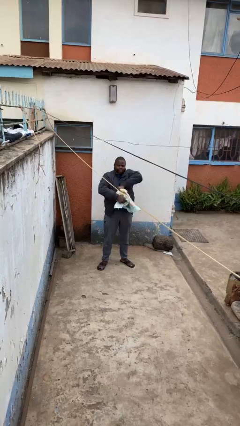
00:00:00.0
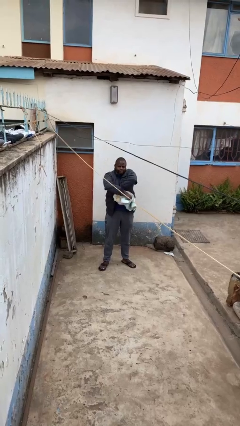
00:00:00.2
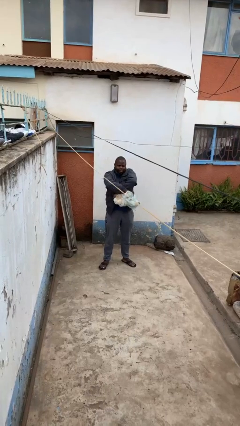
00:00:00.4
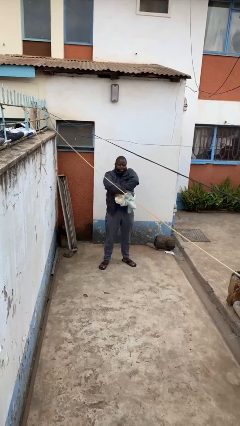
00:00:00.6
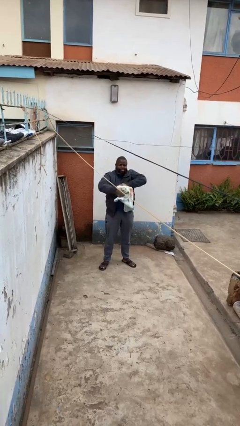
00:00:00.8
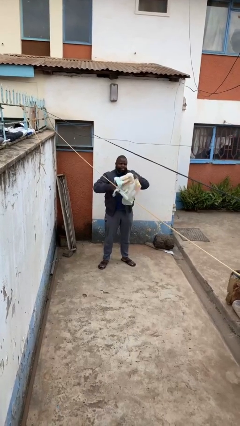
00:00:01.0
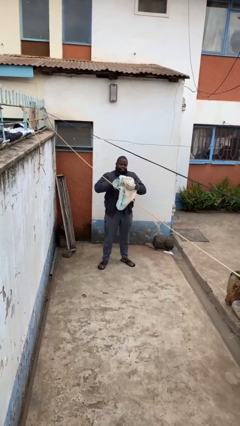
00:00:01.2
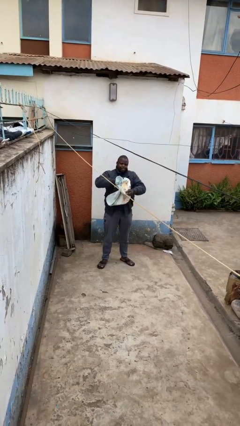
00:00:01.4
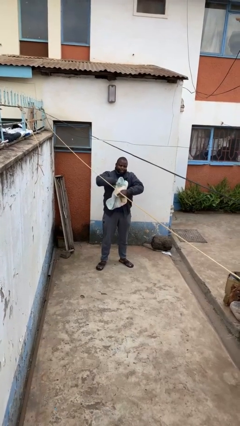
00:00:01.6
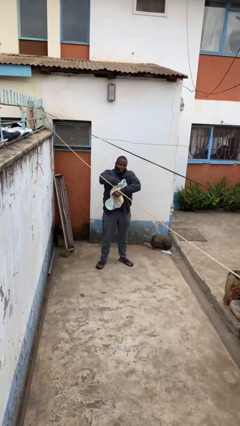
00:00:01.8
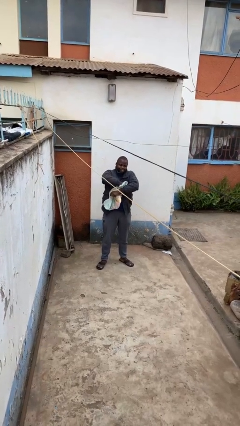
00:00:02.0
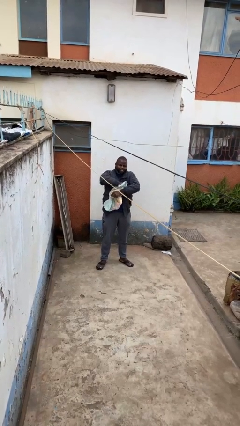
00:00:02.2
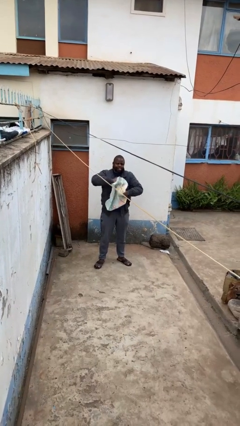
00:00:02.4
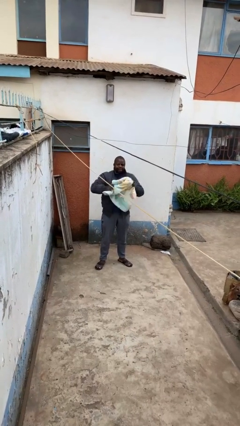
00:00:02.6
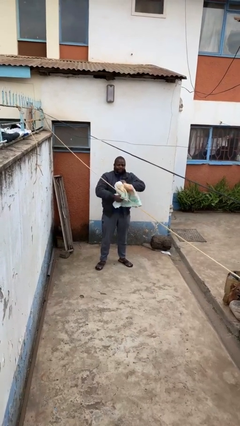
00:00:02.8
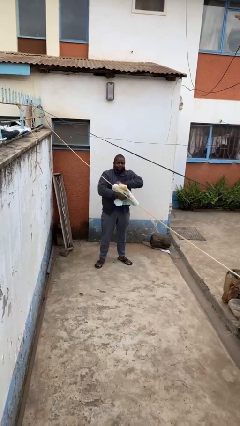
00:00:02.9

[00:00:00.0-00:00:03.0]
person squeezes object

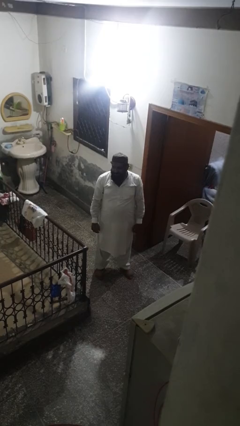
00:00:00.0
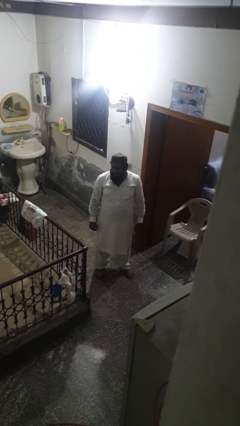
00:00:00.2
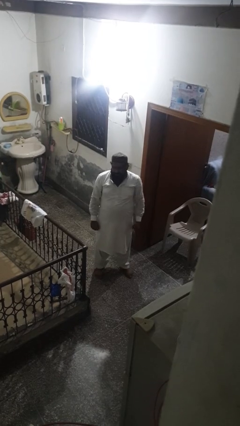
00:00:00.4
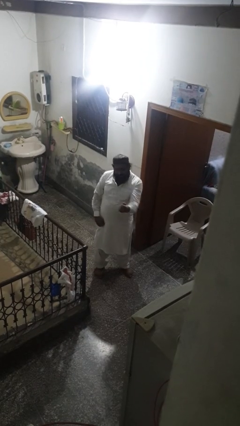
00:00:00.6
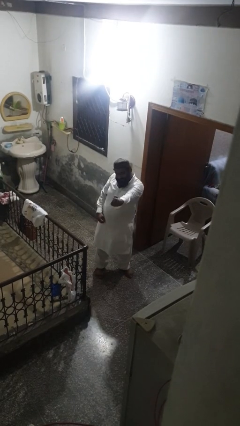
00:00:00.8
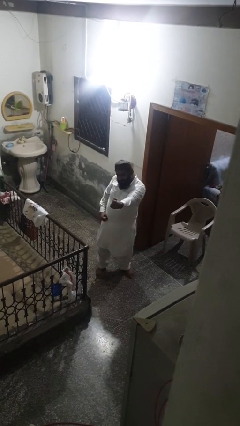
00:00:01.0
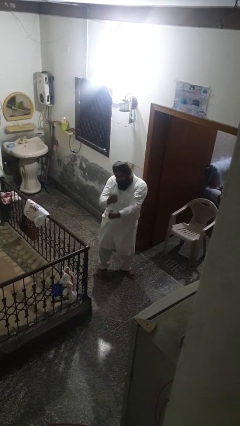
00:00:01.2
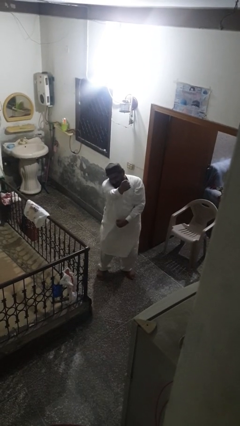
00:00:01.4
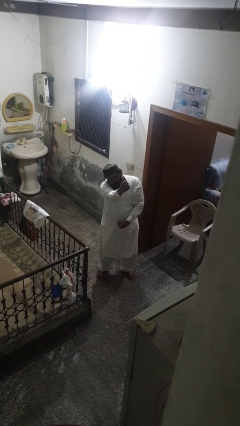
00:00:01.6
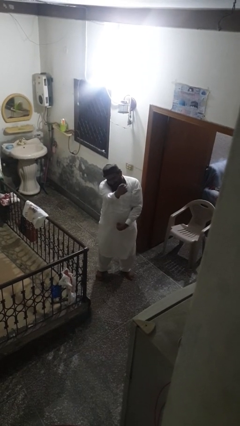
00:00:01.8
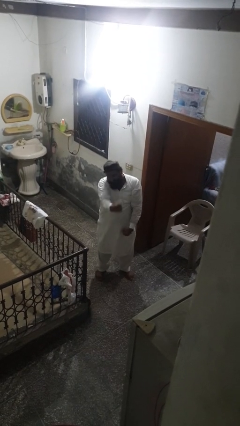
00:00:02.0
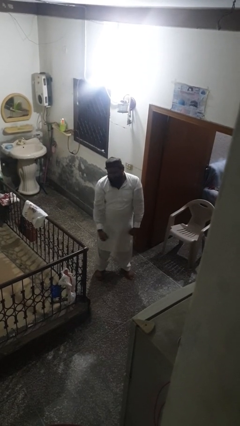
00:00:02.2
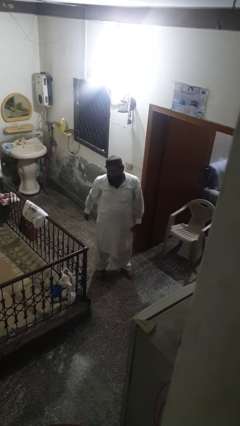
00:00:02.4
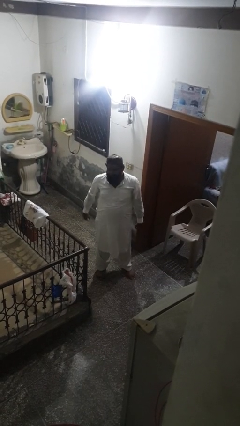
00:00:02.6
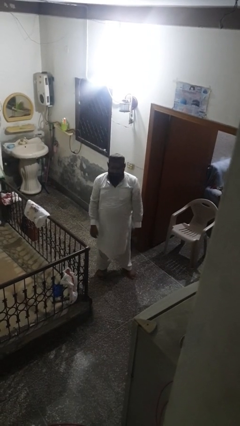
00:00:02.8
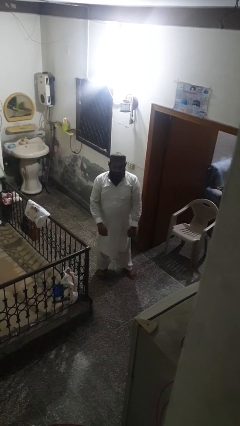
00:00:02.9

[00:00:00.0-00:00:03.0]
person punches

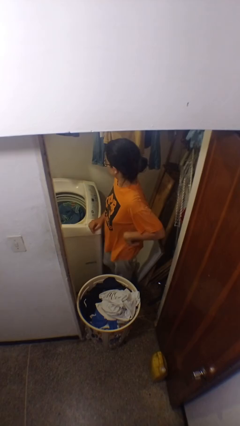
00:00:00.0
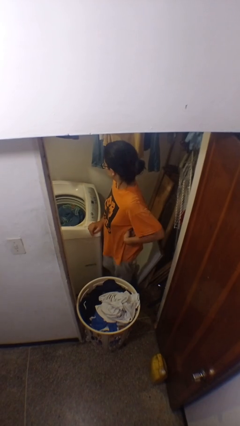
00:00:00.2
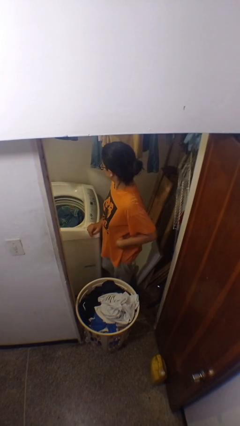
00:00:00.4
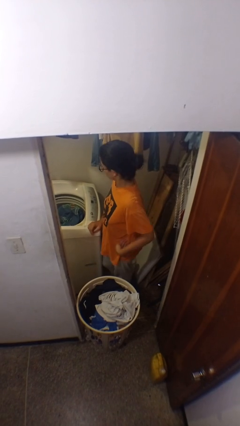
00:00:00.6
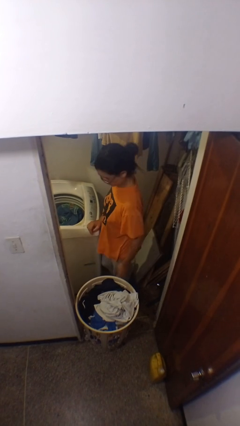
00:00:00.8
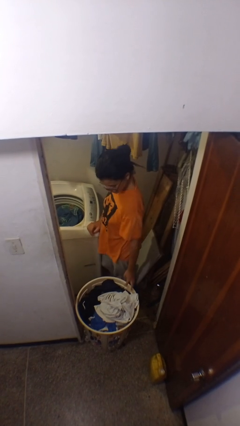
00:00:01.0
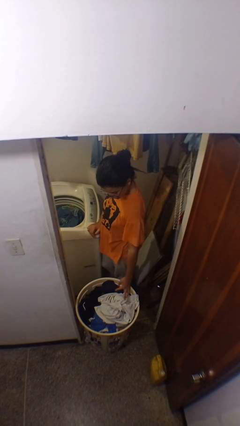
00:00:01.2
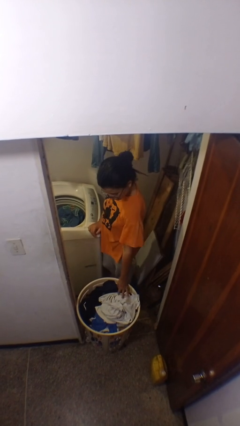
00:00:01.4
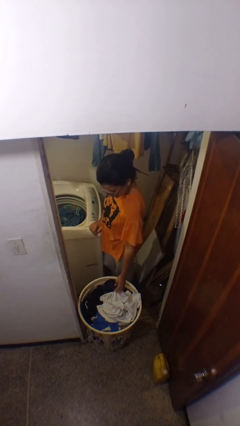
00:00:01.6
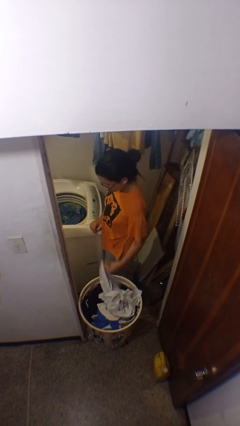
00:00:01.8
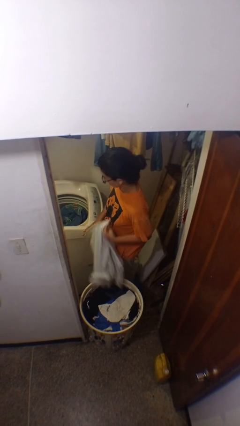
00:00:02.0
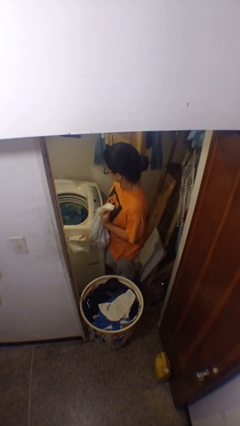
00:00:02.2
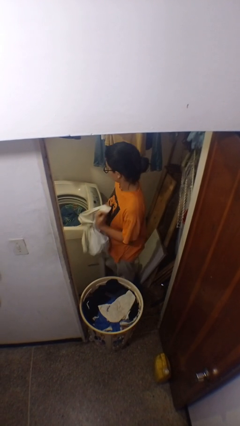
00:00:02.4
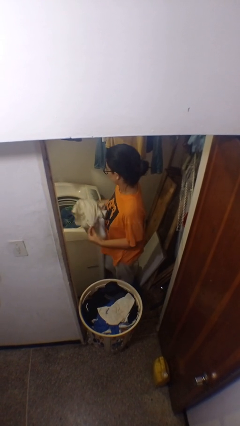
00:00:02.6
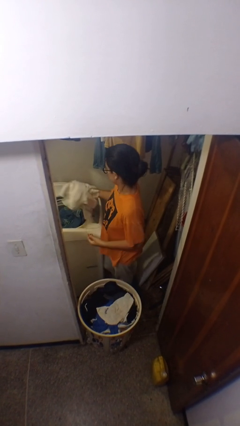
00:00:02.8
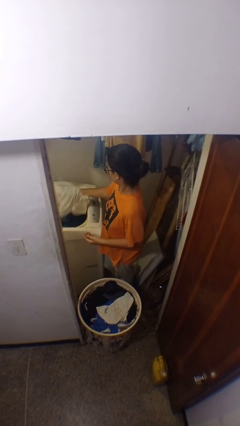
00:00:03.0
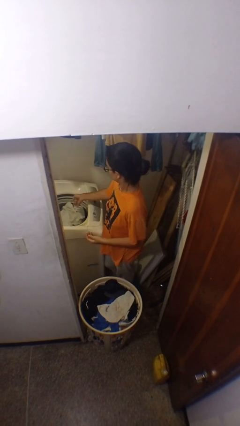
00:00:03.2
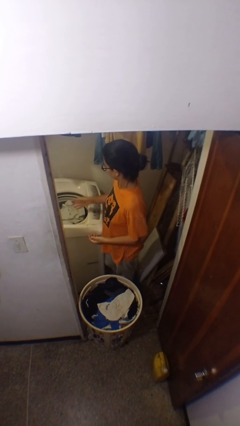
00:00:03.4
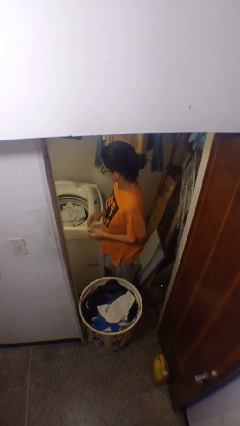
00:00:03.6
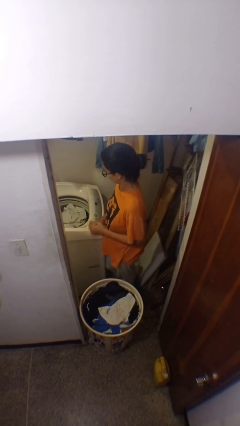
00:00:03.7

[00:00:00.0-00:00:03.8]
person loads clotheswasher

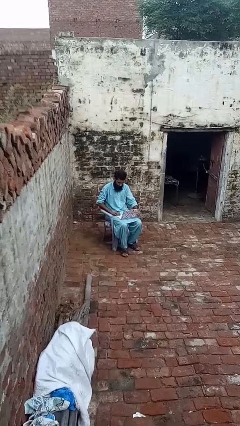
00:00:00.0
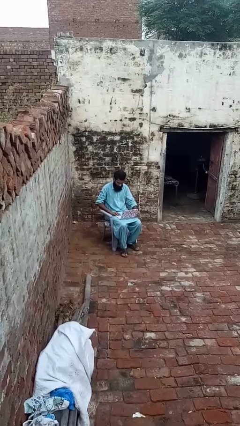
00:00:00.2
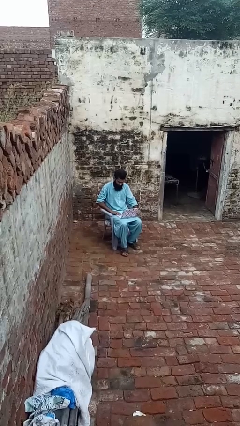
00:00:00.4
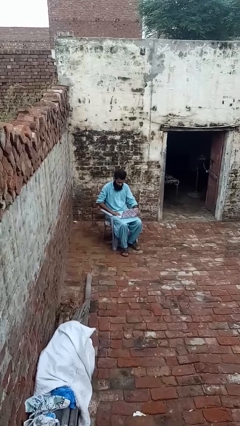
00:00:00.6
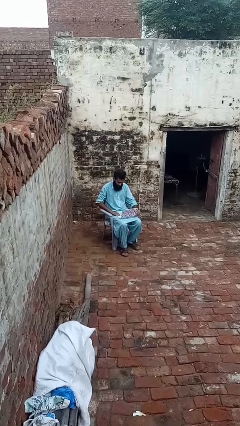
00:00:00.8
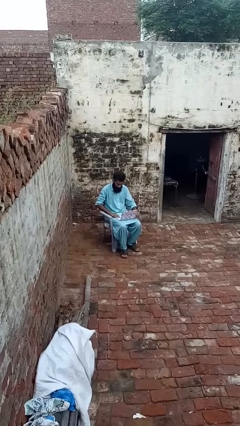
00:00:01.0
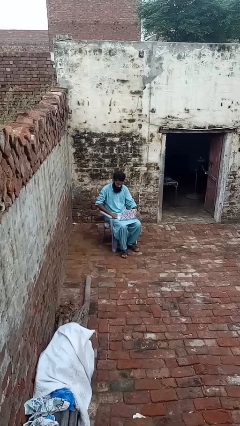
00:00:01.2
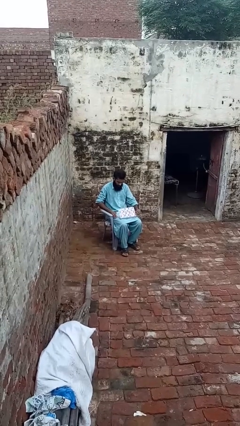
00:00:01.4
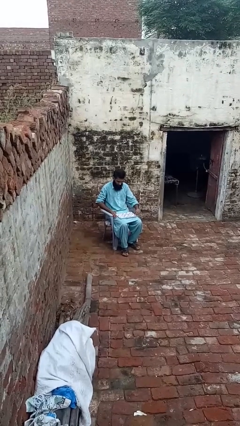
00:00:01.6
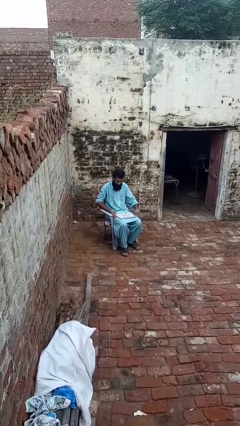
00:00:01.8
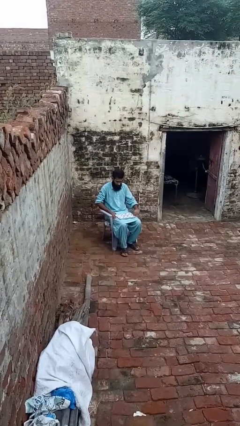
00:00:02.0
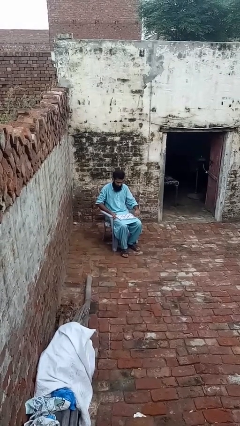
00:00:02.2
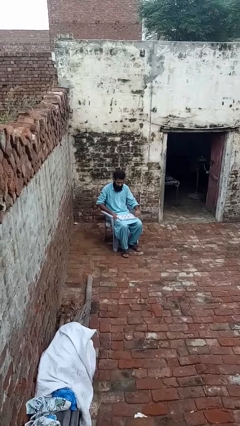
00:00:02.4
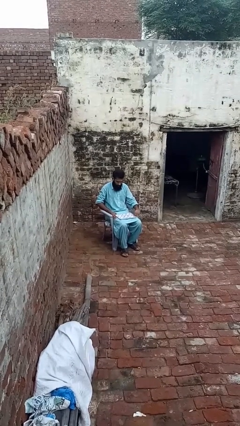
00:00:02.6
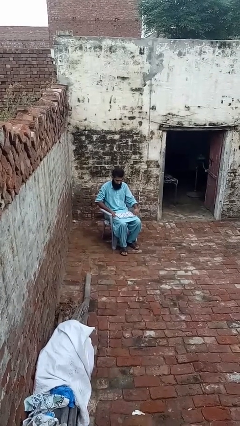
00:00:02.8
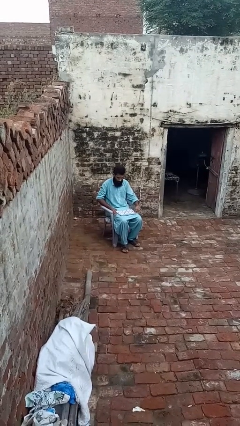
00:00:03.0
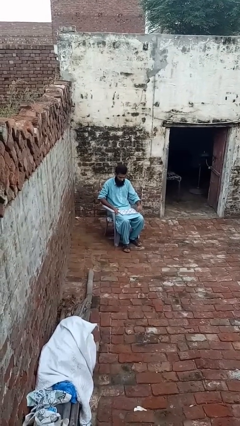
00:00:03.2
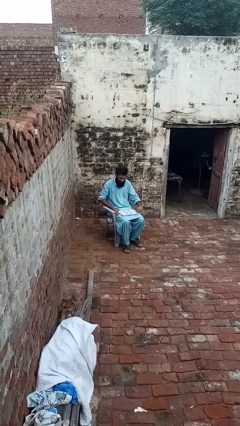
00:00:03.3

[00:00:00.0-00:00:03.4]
person closes laptop

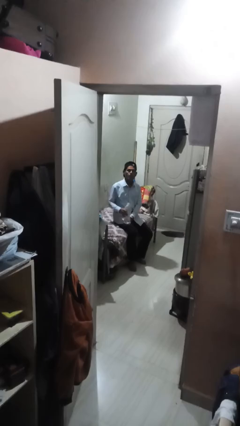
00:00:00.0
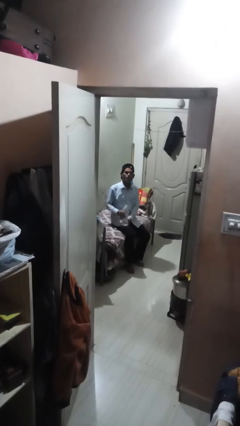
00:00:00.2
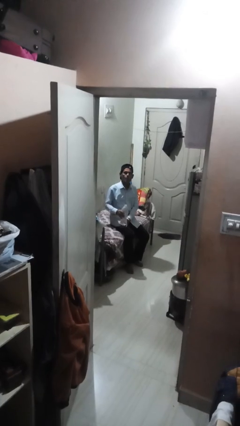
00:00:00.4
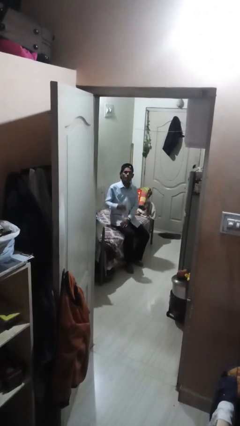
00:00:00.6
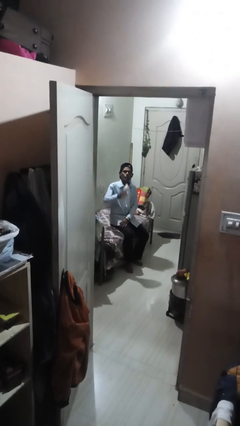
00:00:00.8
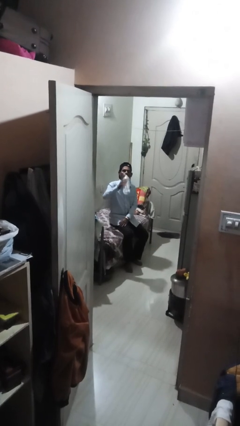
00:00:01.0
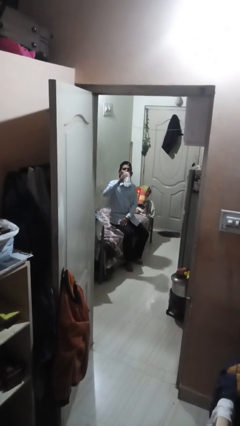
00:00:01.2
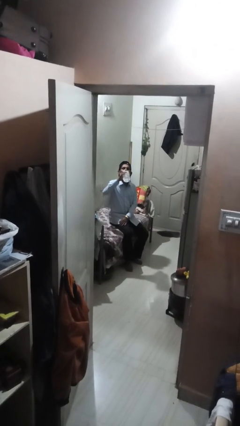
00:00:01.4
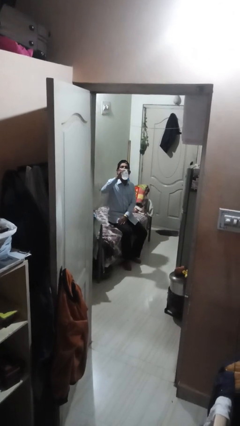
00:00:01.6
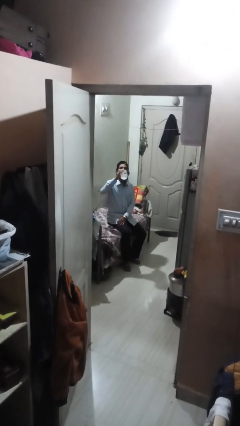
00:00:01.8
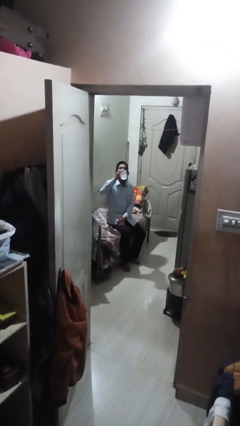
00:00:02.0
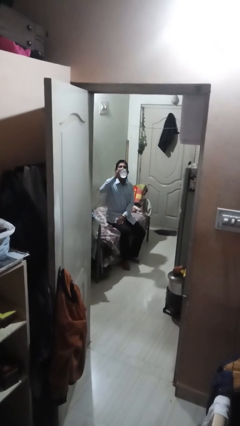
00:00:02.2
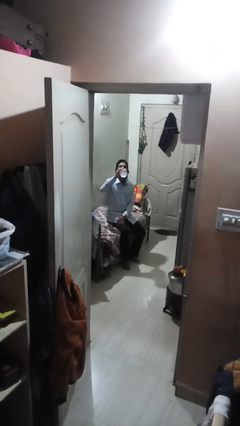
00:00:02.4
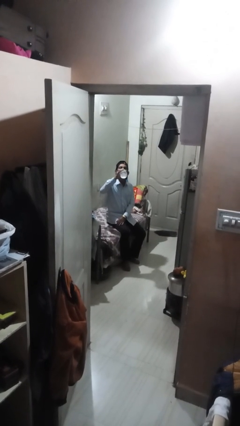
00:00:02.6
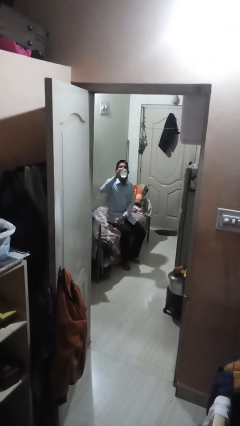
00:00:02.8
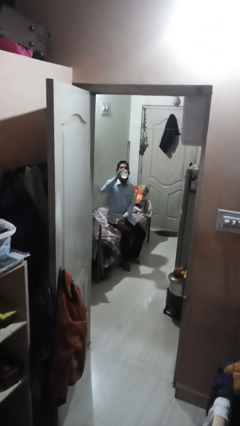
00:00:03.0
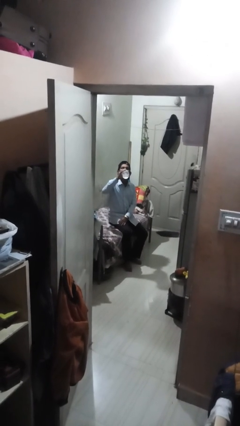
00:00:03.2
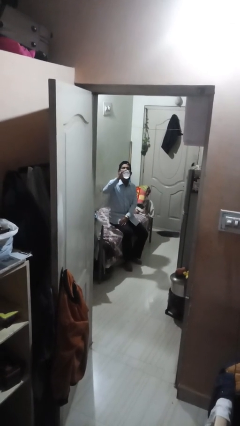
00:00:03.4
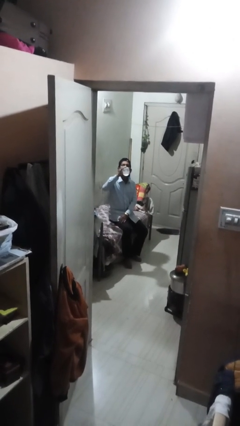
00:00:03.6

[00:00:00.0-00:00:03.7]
person drinks from bottle

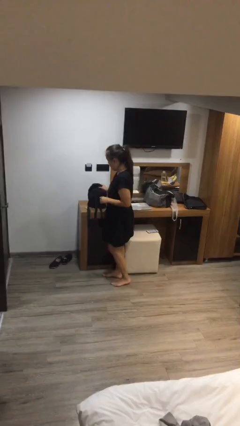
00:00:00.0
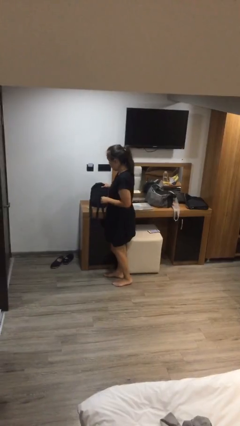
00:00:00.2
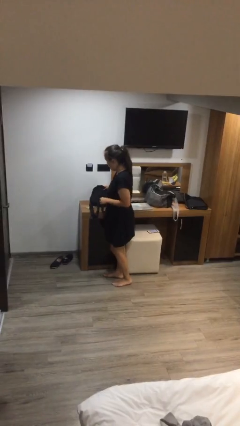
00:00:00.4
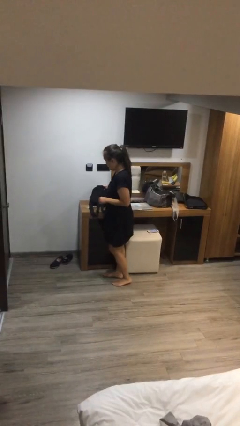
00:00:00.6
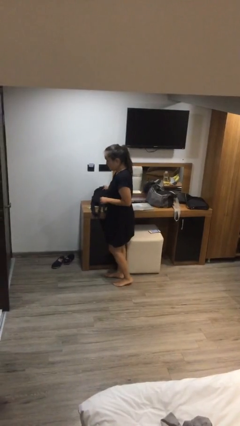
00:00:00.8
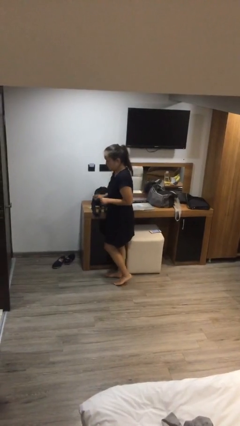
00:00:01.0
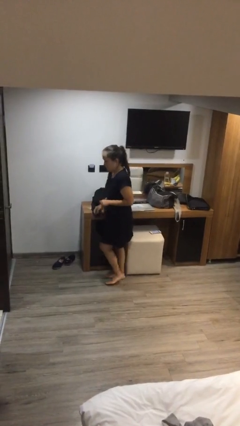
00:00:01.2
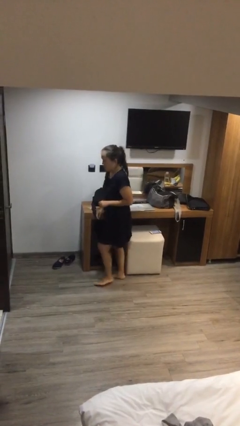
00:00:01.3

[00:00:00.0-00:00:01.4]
person puts down object on table
